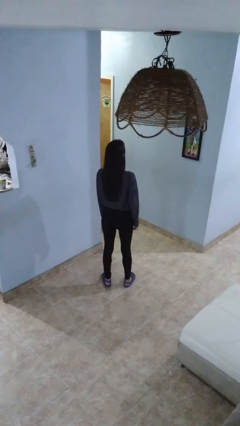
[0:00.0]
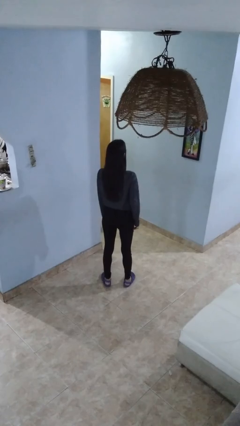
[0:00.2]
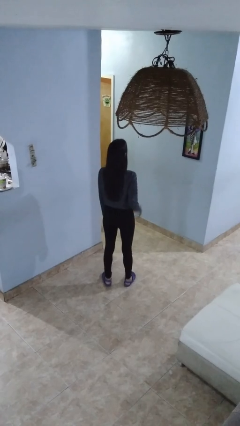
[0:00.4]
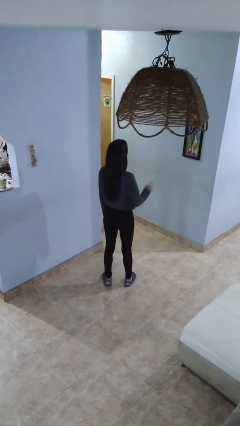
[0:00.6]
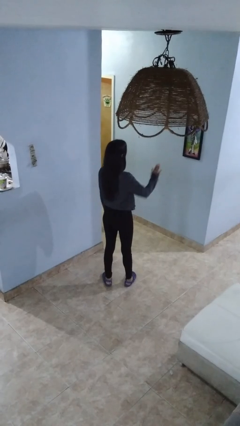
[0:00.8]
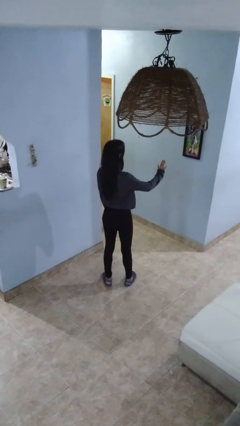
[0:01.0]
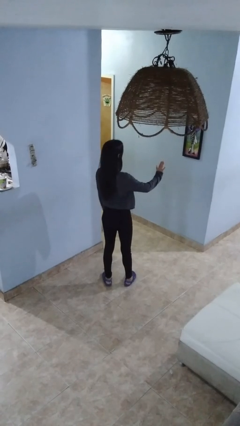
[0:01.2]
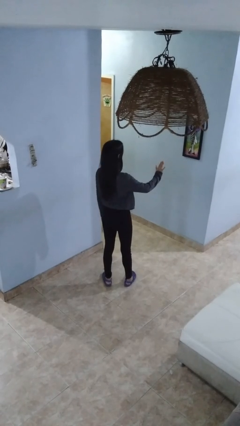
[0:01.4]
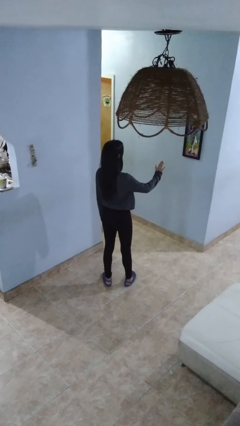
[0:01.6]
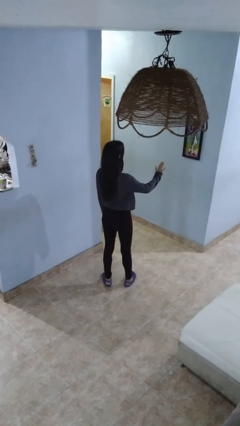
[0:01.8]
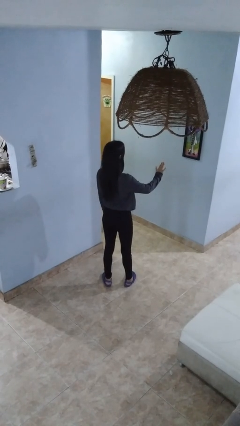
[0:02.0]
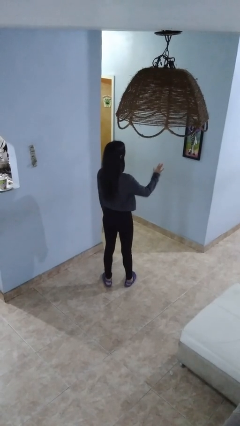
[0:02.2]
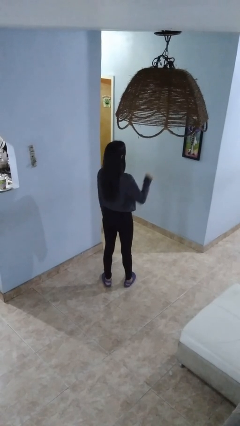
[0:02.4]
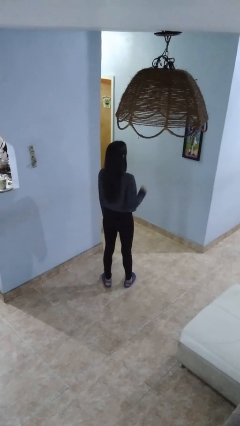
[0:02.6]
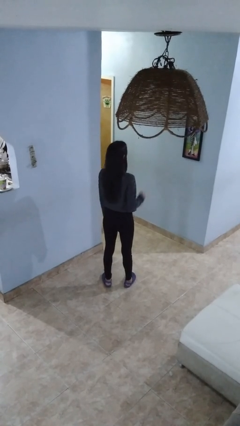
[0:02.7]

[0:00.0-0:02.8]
person gestures stop

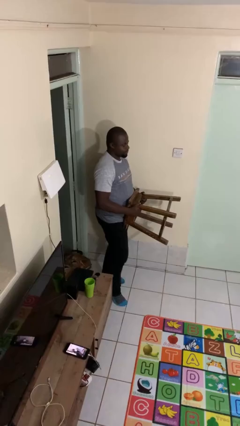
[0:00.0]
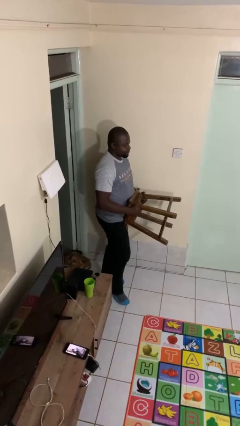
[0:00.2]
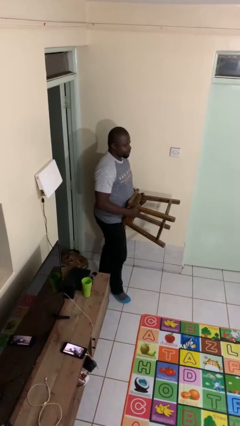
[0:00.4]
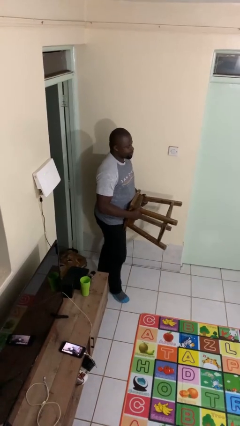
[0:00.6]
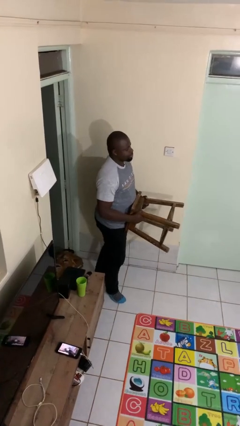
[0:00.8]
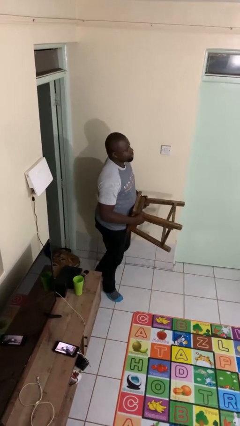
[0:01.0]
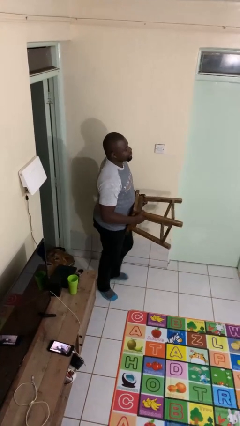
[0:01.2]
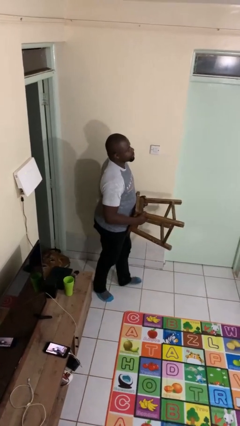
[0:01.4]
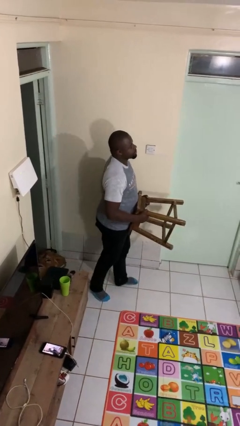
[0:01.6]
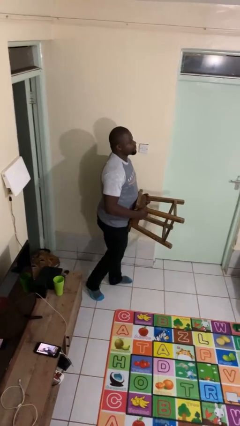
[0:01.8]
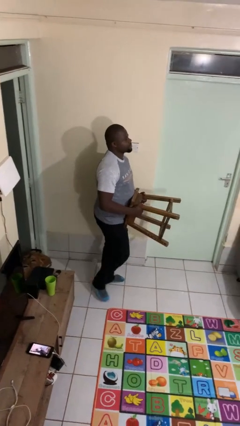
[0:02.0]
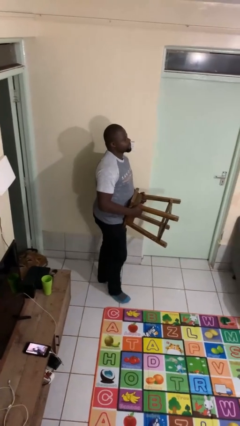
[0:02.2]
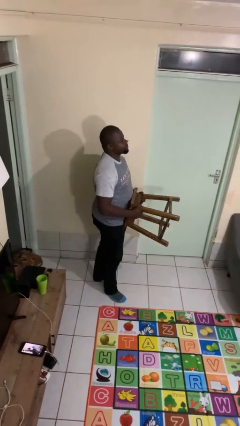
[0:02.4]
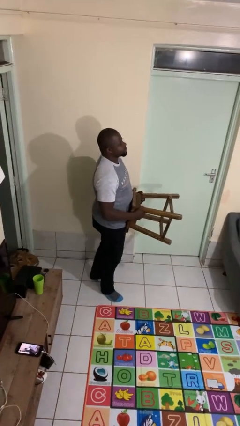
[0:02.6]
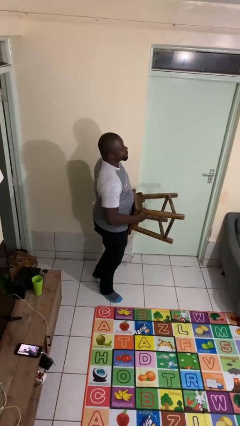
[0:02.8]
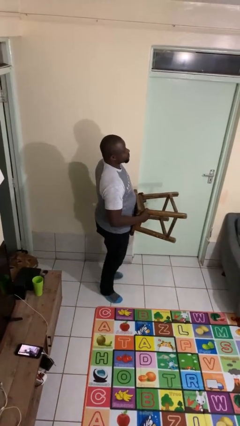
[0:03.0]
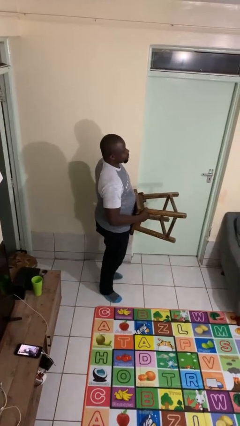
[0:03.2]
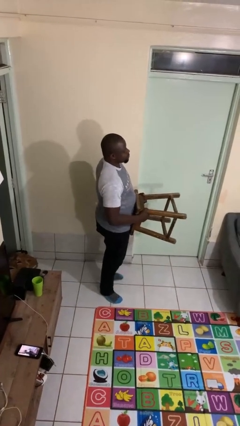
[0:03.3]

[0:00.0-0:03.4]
person carries furniture

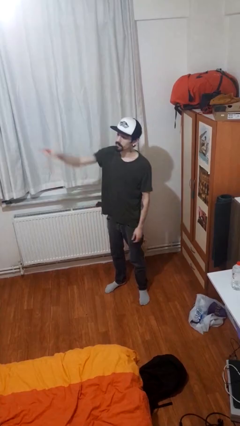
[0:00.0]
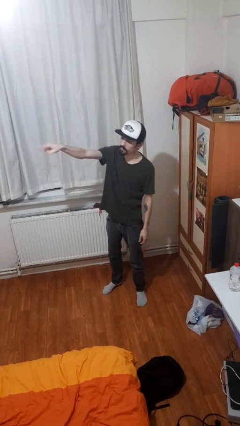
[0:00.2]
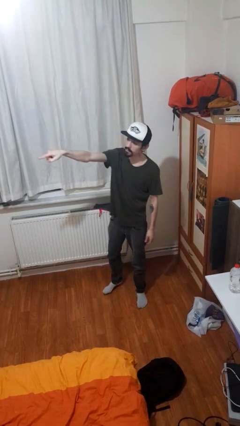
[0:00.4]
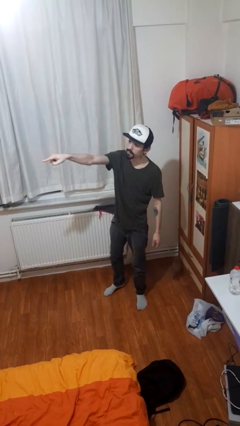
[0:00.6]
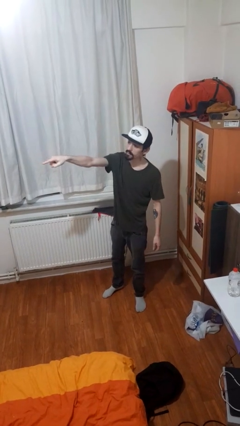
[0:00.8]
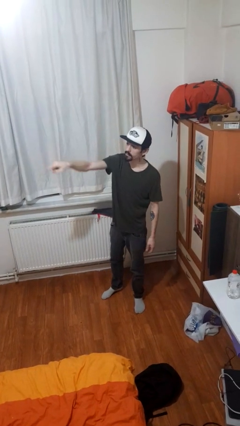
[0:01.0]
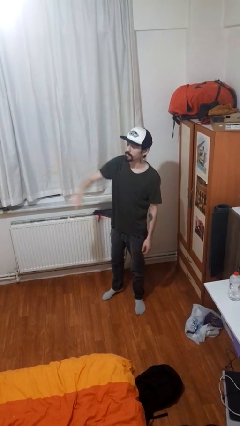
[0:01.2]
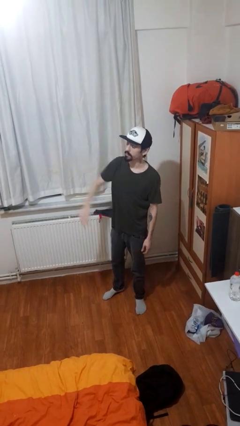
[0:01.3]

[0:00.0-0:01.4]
person points at person

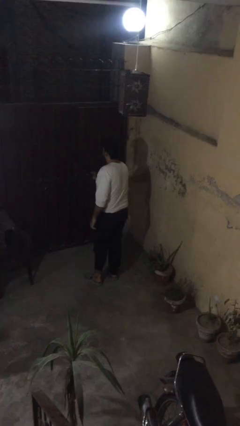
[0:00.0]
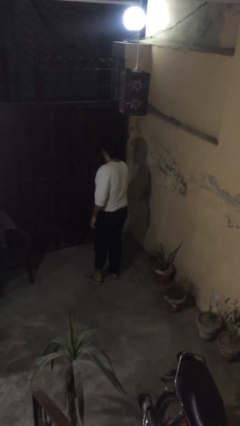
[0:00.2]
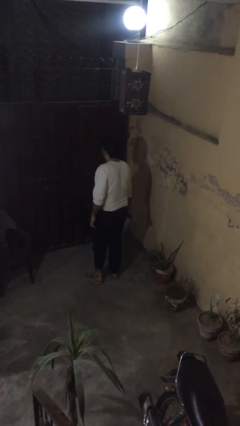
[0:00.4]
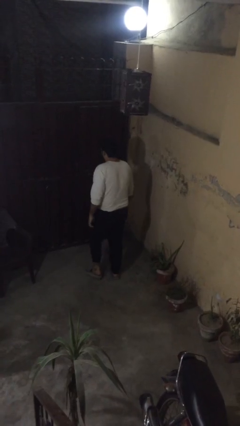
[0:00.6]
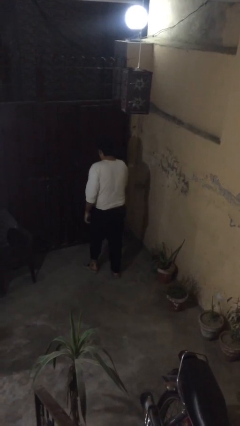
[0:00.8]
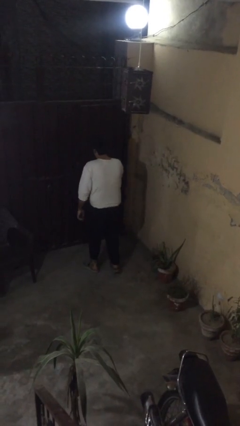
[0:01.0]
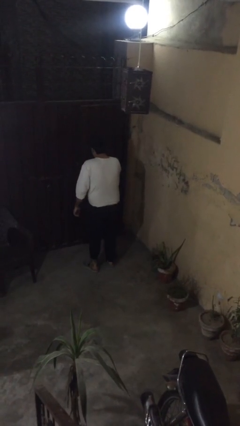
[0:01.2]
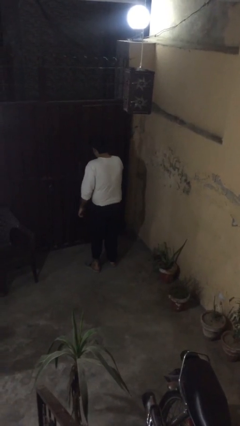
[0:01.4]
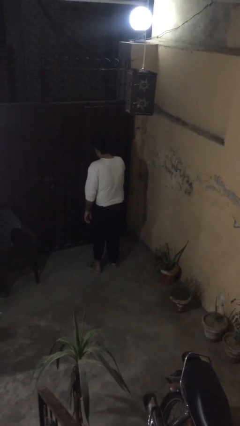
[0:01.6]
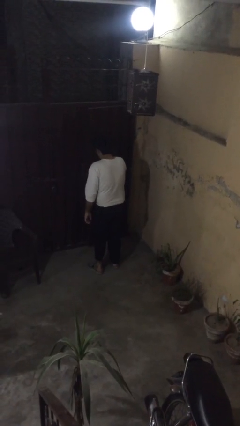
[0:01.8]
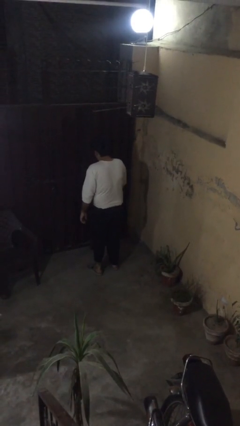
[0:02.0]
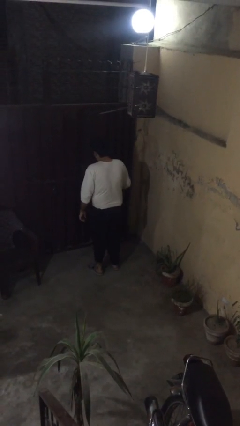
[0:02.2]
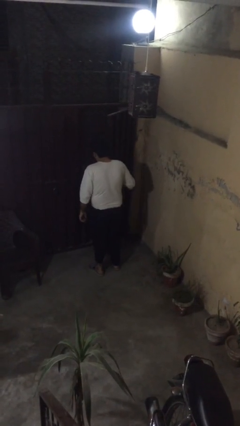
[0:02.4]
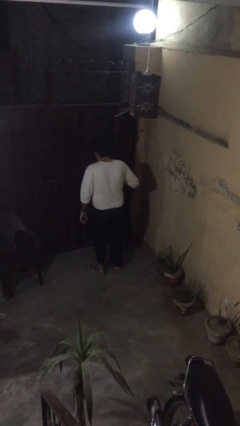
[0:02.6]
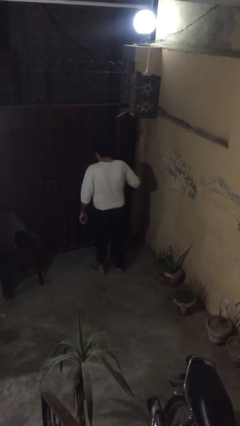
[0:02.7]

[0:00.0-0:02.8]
person opens facility door

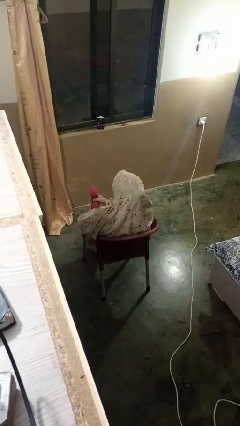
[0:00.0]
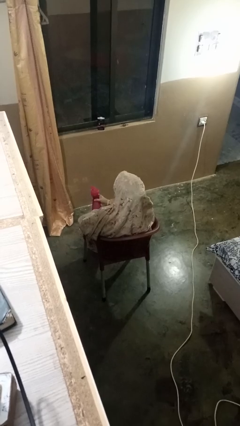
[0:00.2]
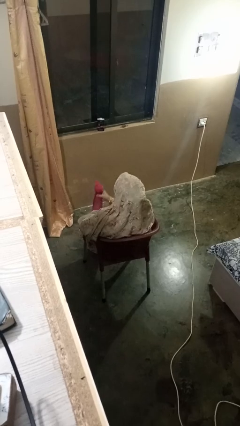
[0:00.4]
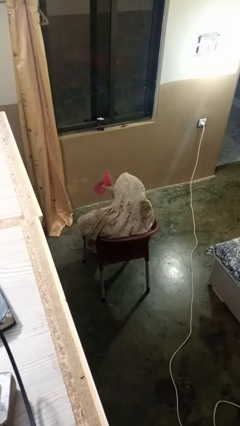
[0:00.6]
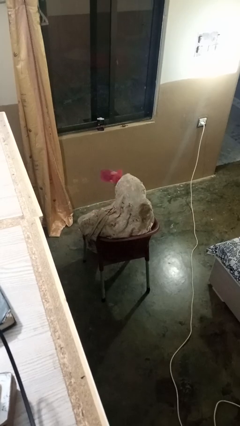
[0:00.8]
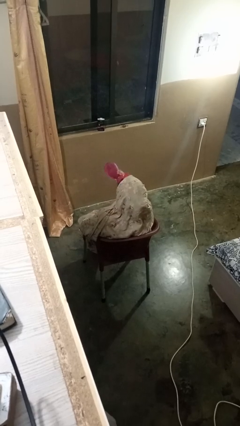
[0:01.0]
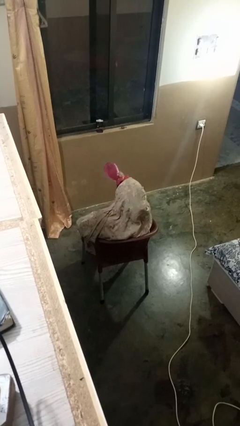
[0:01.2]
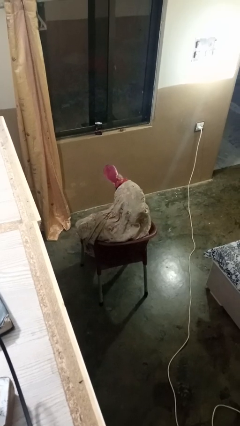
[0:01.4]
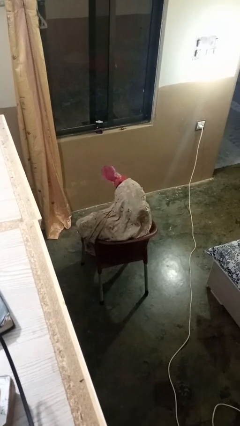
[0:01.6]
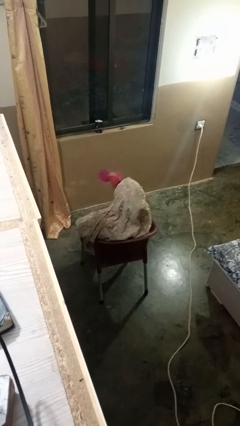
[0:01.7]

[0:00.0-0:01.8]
person drinks from bottle

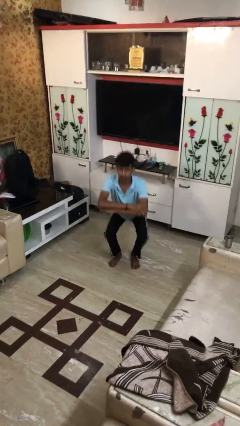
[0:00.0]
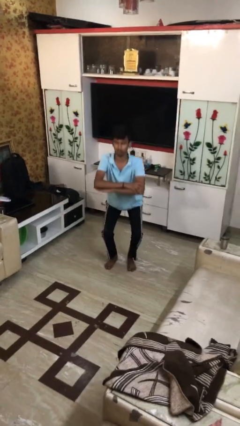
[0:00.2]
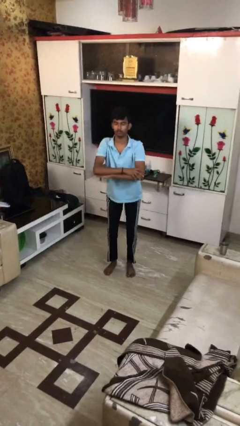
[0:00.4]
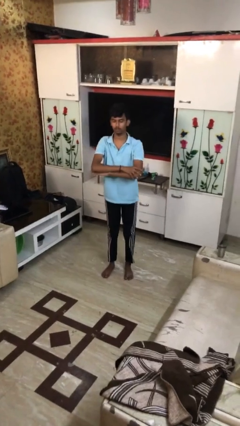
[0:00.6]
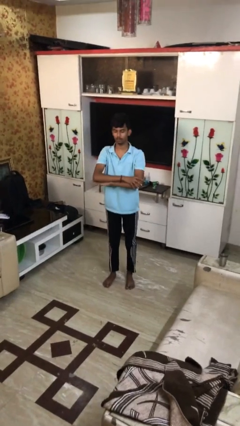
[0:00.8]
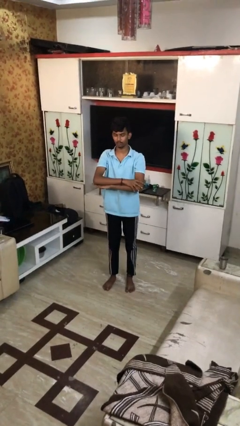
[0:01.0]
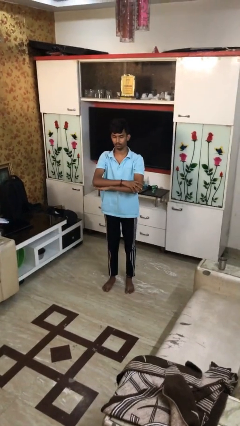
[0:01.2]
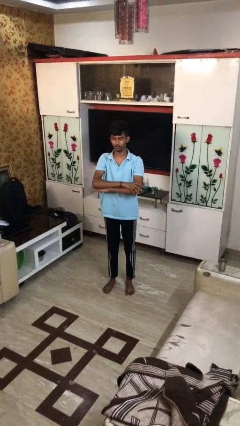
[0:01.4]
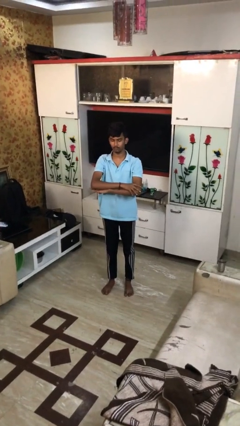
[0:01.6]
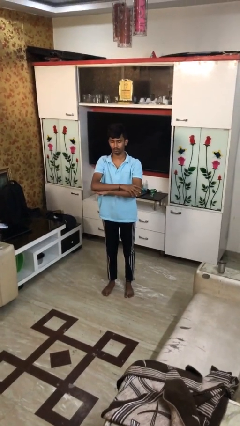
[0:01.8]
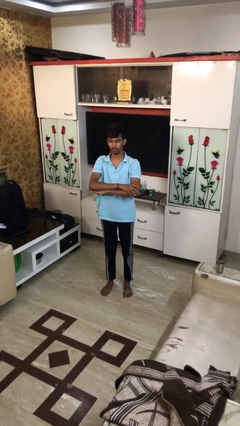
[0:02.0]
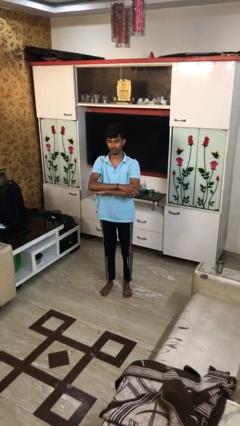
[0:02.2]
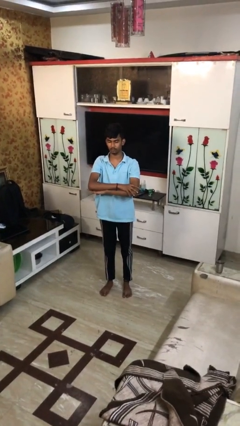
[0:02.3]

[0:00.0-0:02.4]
person stands up

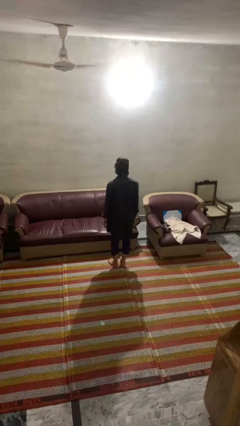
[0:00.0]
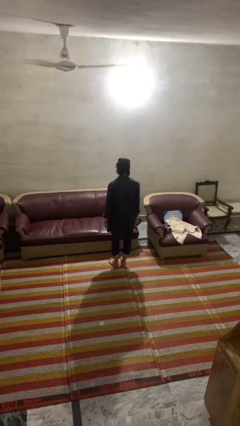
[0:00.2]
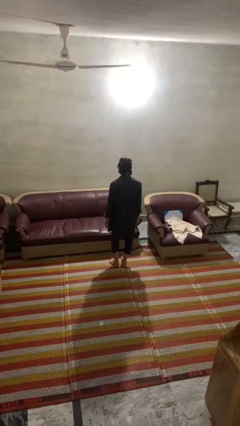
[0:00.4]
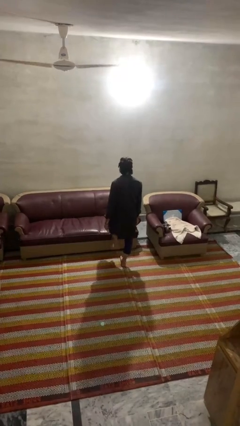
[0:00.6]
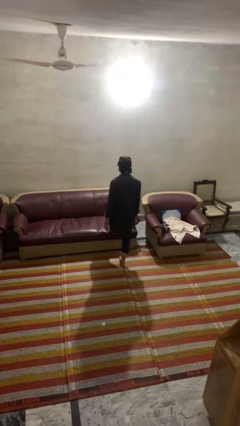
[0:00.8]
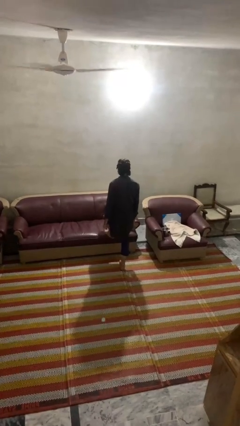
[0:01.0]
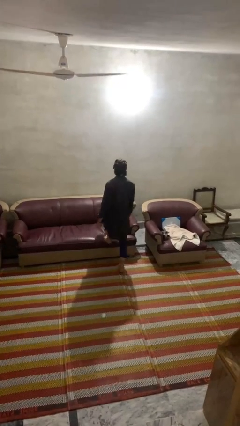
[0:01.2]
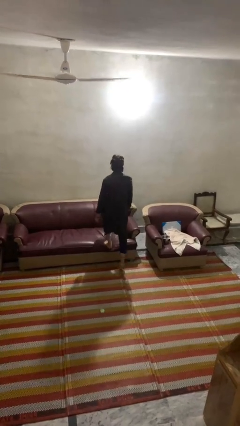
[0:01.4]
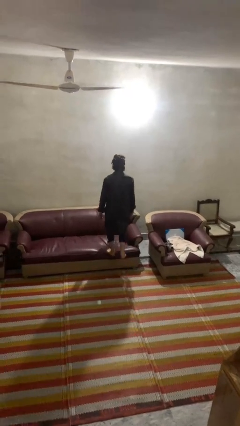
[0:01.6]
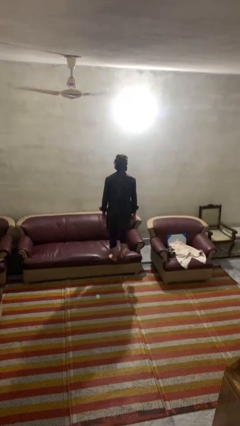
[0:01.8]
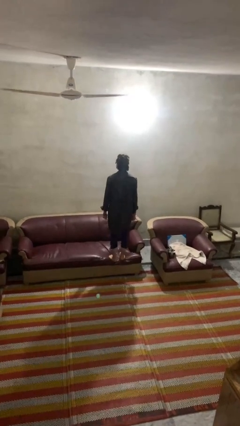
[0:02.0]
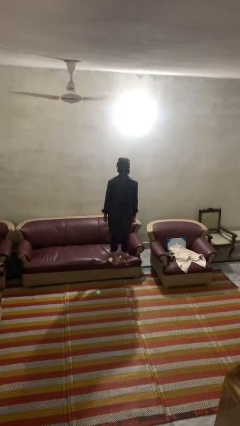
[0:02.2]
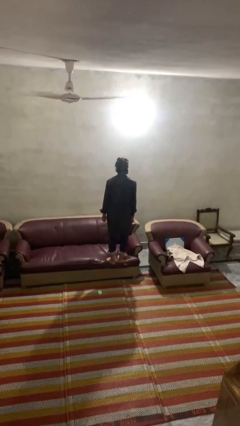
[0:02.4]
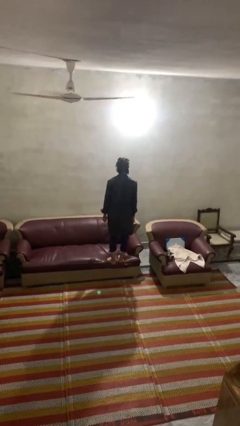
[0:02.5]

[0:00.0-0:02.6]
person climbs on couch
